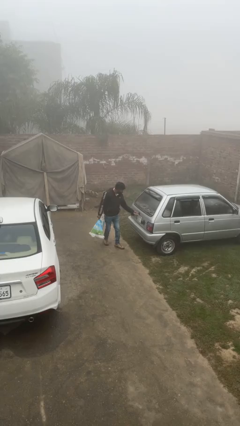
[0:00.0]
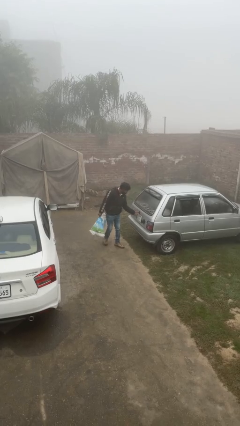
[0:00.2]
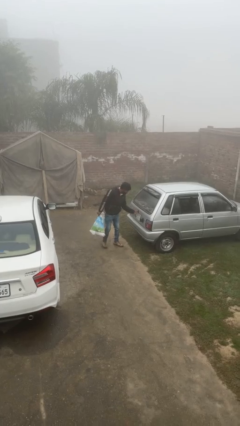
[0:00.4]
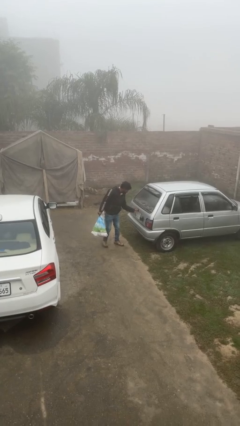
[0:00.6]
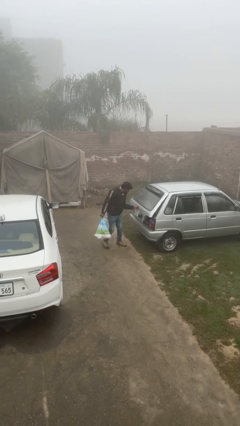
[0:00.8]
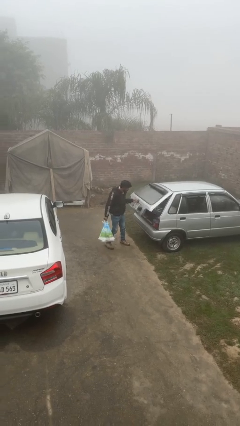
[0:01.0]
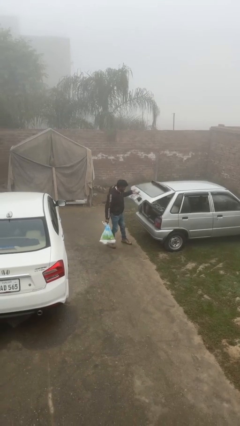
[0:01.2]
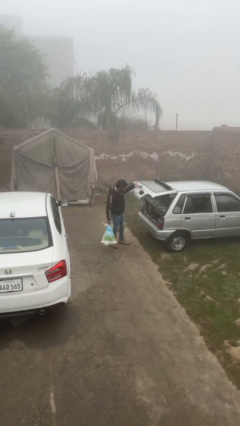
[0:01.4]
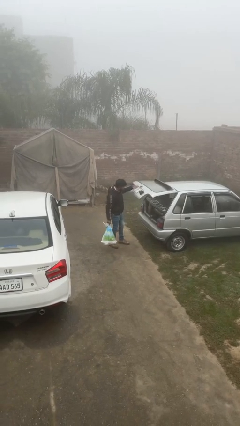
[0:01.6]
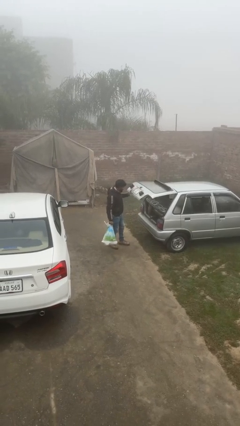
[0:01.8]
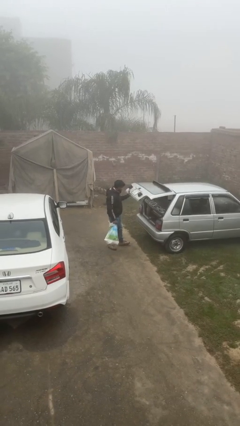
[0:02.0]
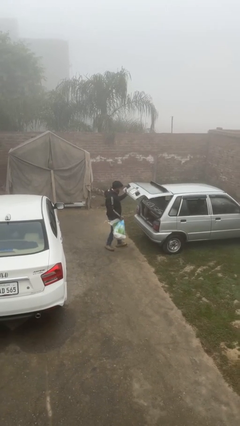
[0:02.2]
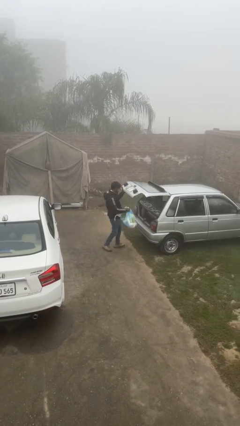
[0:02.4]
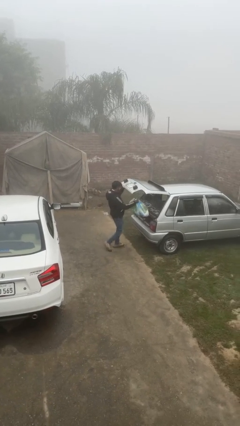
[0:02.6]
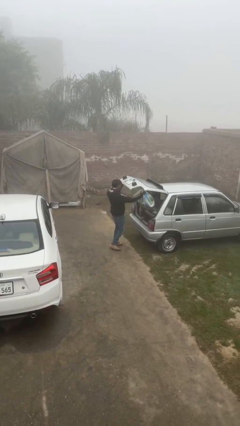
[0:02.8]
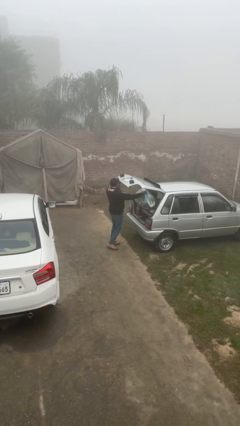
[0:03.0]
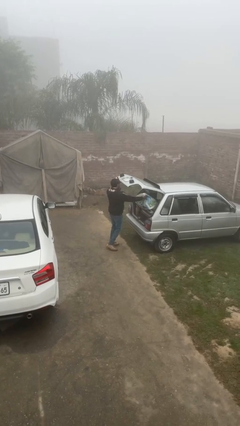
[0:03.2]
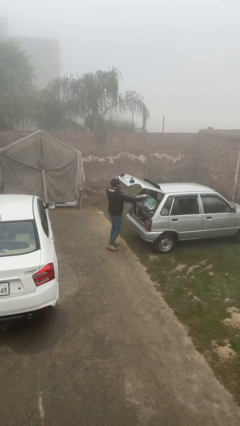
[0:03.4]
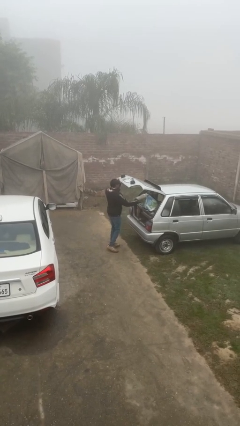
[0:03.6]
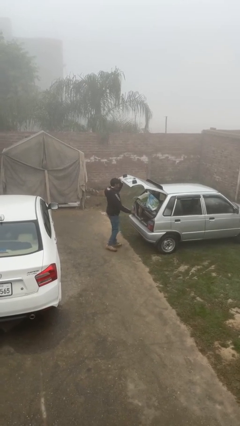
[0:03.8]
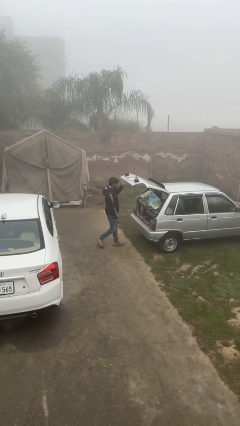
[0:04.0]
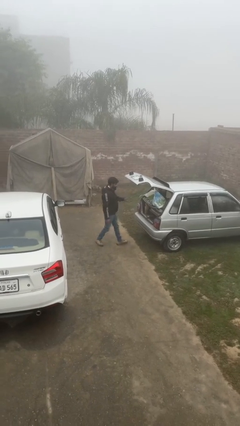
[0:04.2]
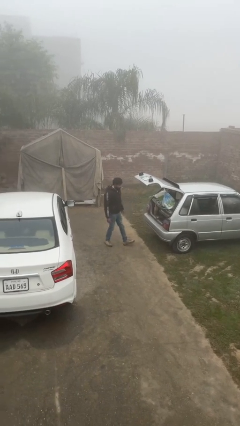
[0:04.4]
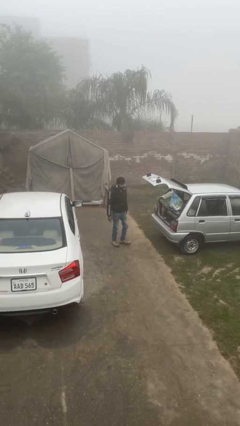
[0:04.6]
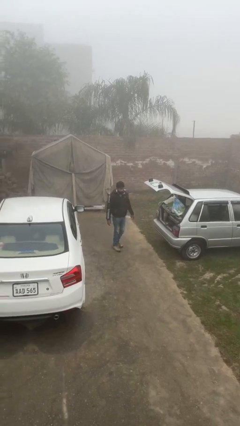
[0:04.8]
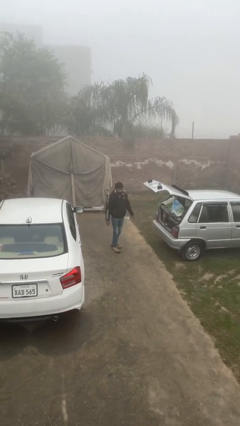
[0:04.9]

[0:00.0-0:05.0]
person loads car

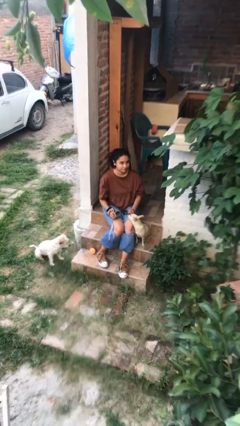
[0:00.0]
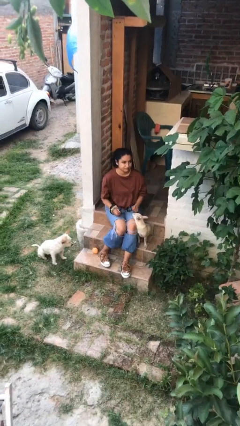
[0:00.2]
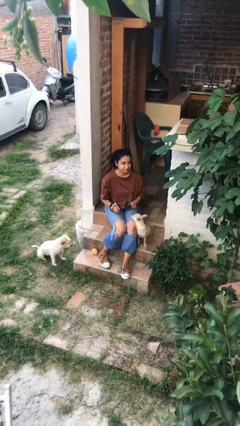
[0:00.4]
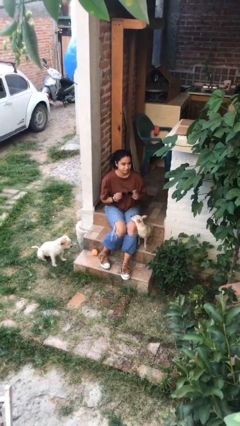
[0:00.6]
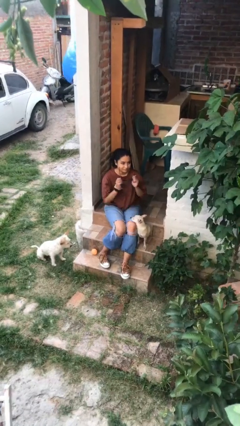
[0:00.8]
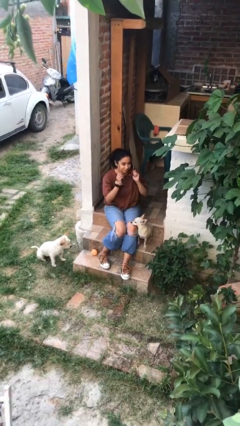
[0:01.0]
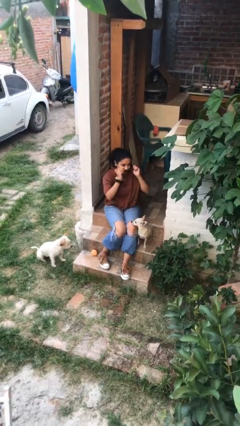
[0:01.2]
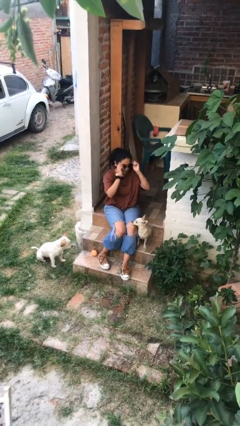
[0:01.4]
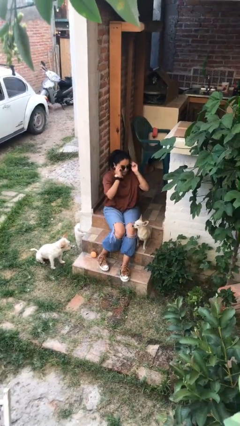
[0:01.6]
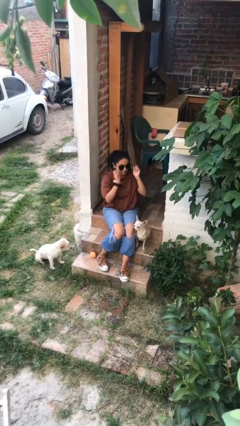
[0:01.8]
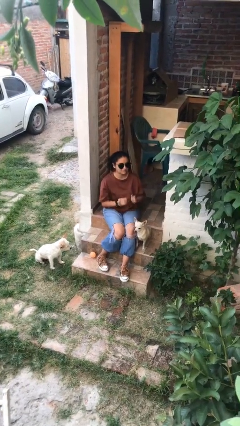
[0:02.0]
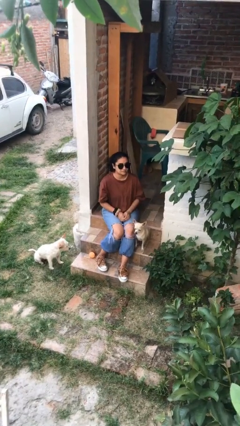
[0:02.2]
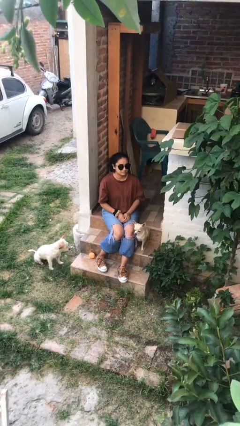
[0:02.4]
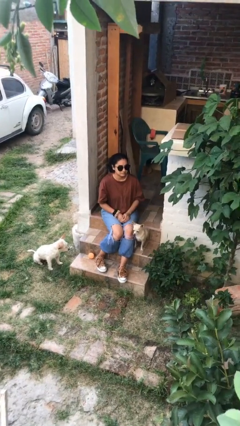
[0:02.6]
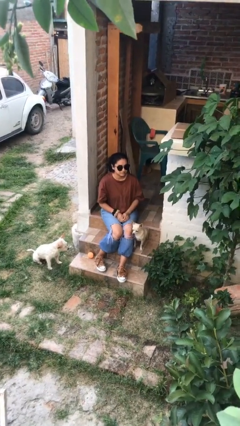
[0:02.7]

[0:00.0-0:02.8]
person puts on sunglasses

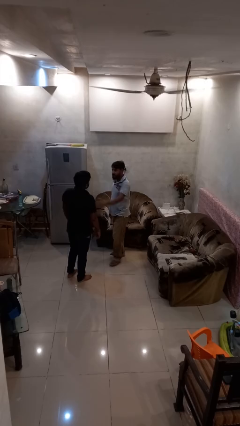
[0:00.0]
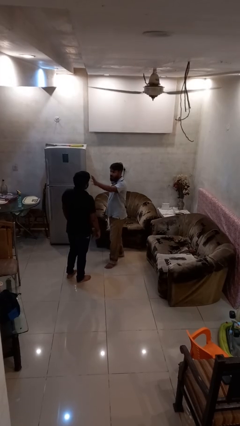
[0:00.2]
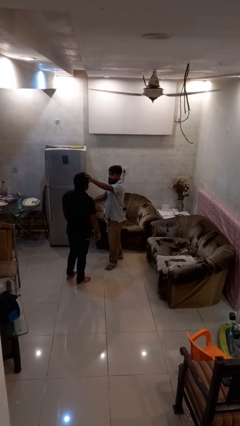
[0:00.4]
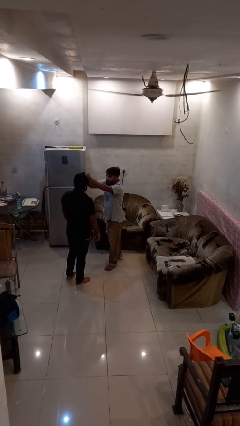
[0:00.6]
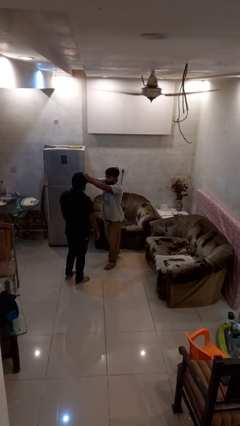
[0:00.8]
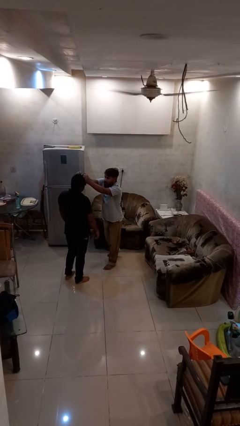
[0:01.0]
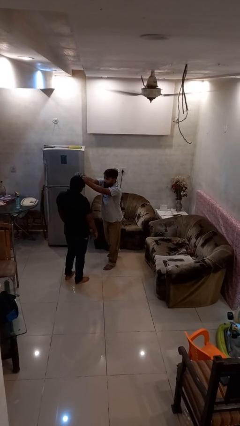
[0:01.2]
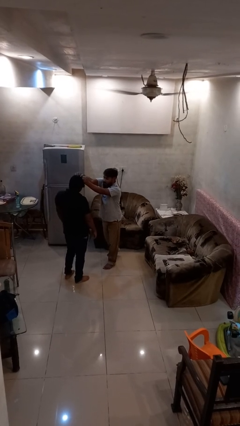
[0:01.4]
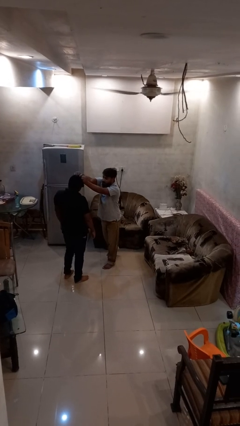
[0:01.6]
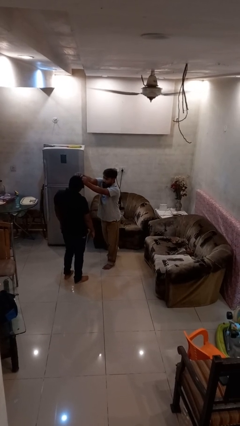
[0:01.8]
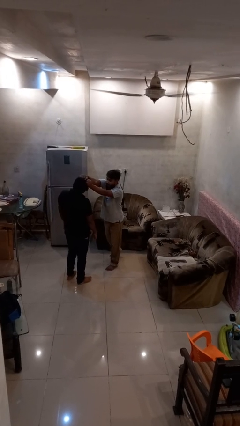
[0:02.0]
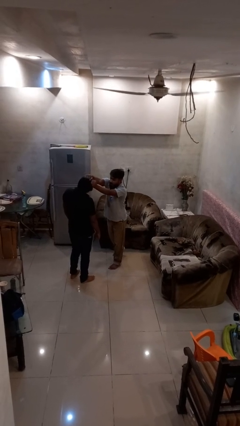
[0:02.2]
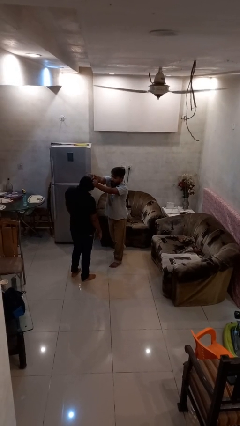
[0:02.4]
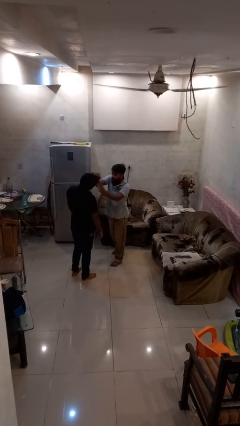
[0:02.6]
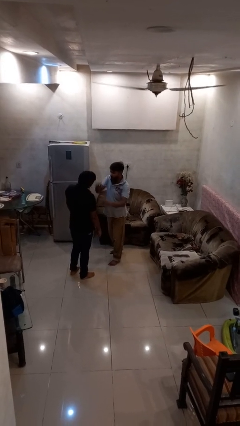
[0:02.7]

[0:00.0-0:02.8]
person grabs person by hair

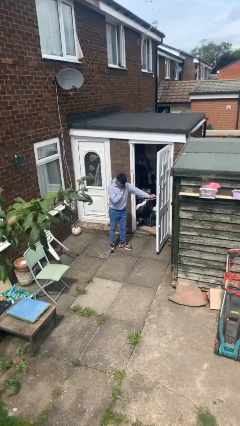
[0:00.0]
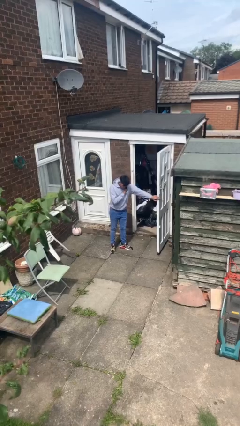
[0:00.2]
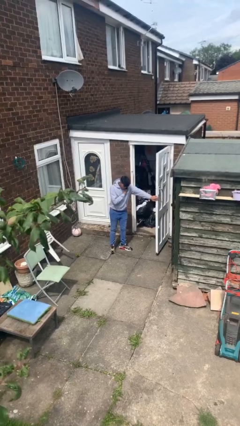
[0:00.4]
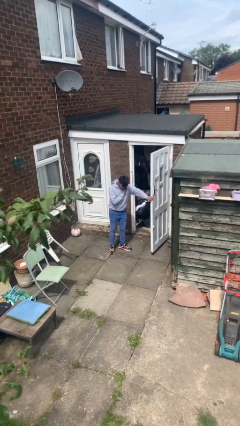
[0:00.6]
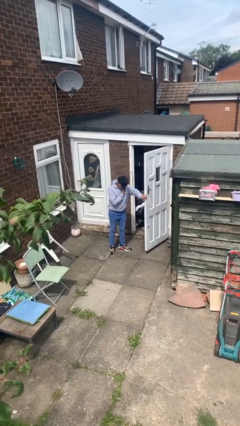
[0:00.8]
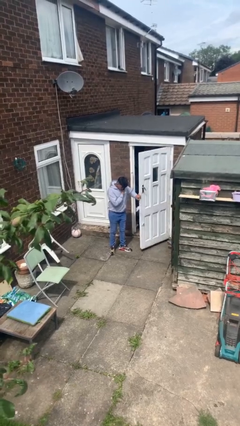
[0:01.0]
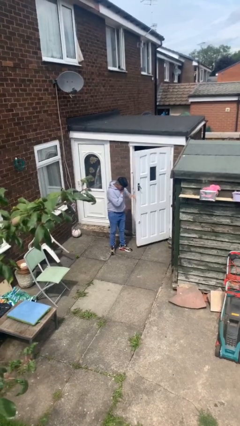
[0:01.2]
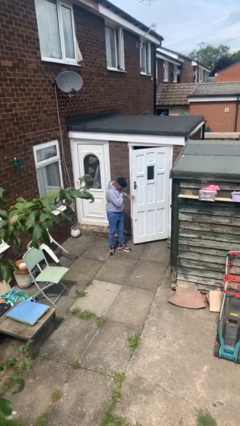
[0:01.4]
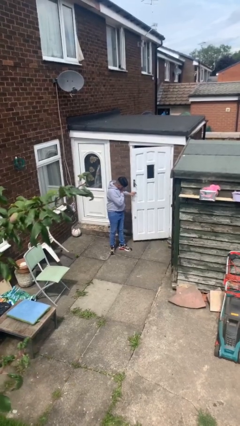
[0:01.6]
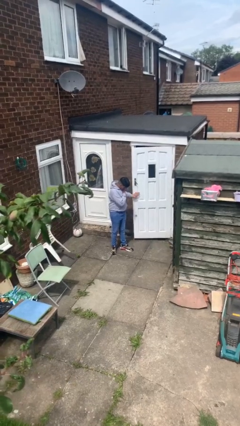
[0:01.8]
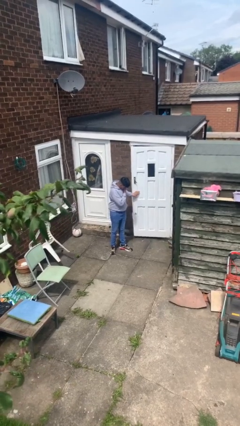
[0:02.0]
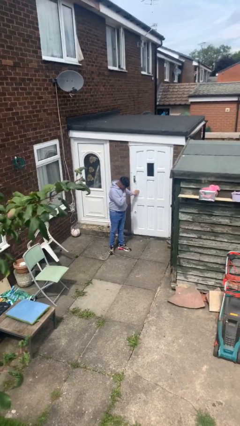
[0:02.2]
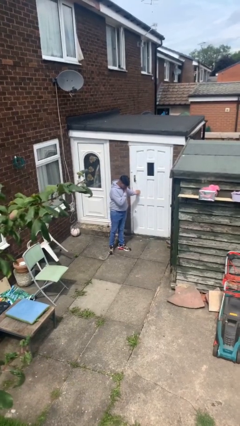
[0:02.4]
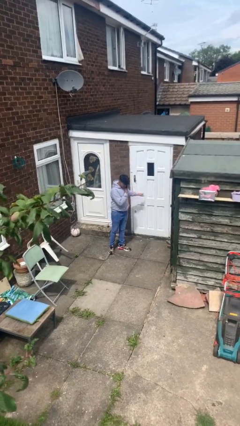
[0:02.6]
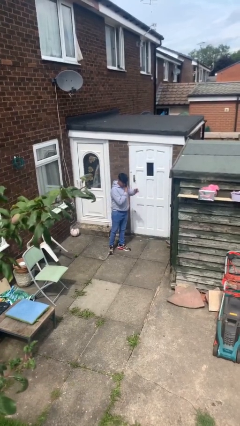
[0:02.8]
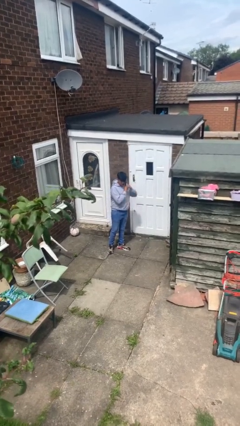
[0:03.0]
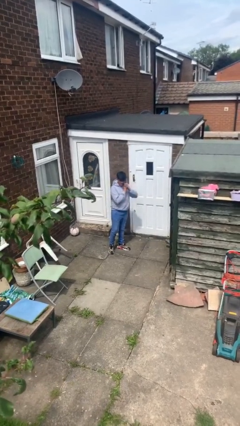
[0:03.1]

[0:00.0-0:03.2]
person closes facility door

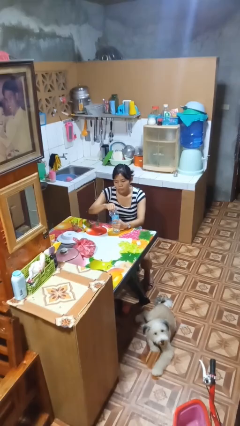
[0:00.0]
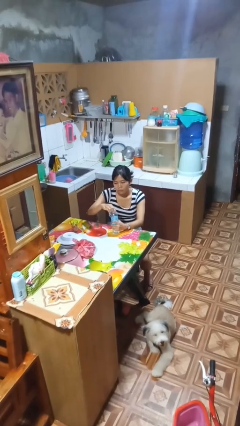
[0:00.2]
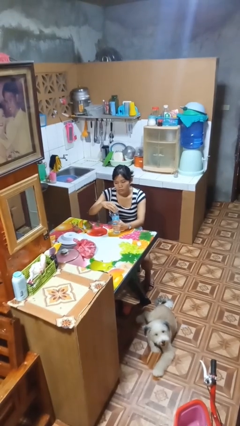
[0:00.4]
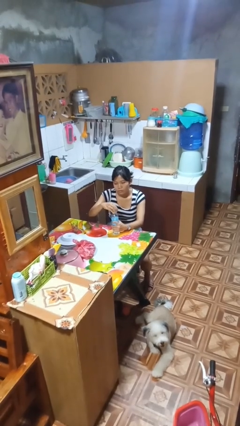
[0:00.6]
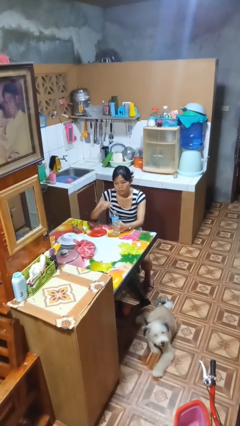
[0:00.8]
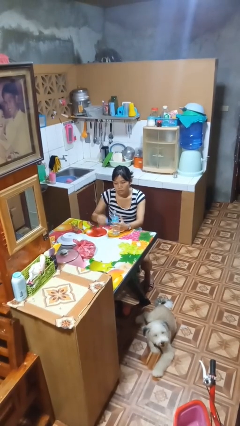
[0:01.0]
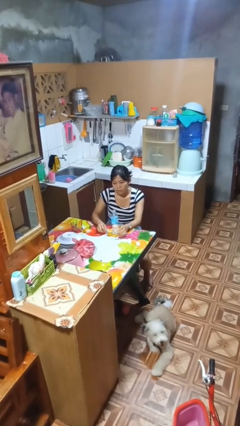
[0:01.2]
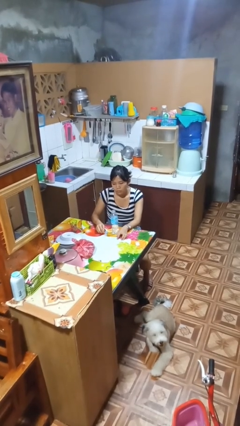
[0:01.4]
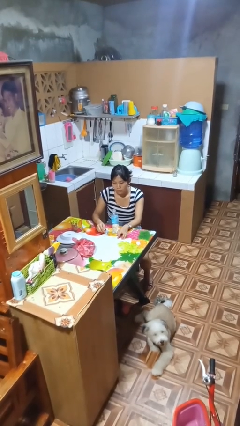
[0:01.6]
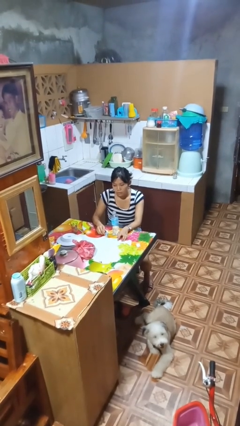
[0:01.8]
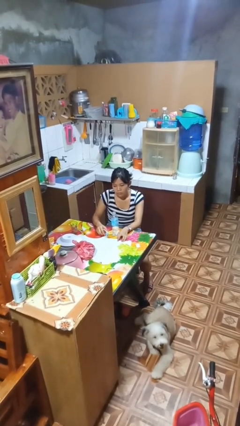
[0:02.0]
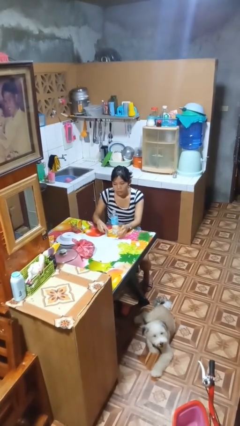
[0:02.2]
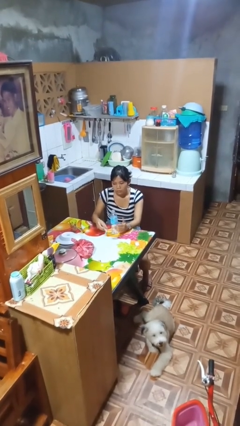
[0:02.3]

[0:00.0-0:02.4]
person unscrews lid from bottle

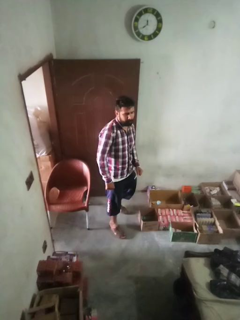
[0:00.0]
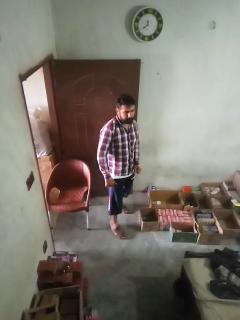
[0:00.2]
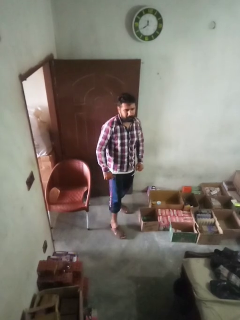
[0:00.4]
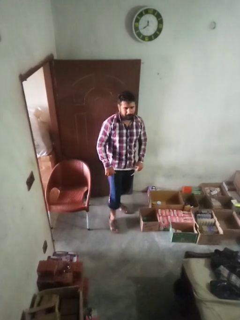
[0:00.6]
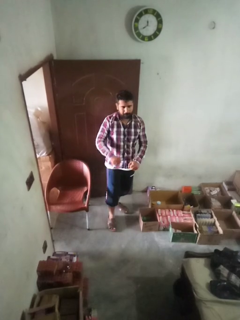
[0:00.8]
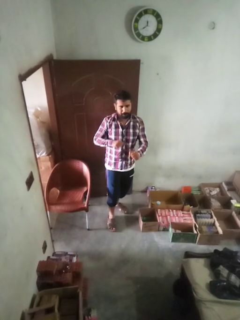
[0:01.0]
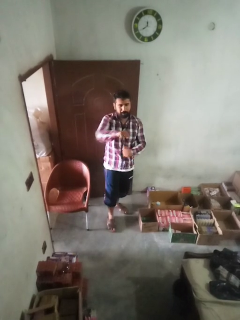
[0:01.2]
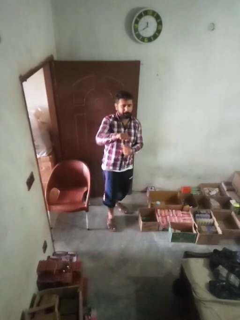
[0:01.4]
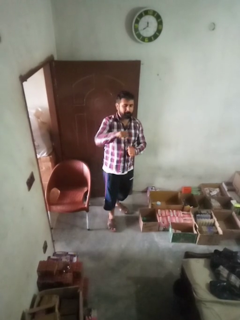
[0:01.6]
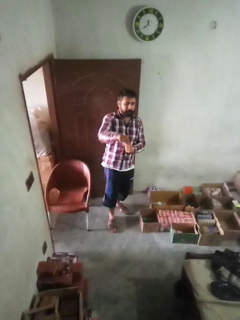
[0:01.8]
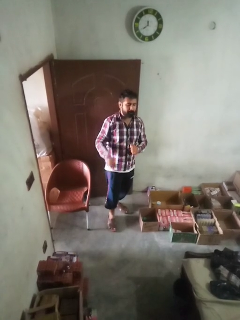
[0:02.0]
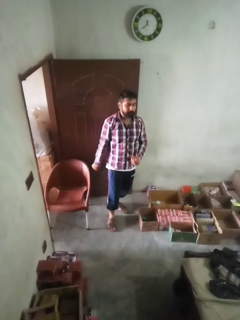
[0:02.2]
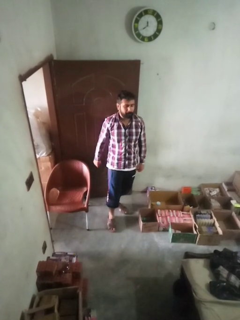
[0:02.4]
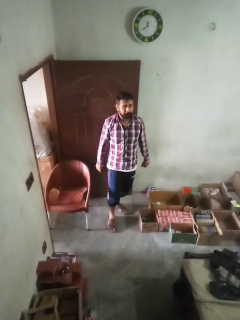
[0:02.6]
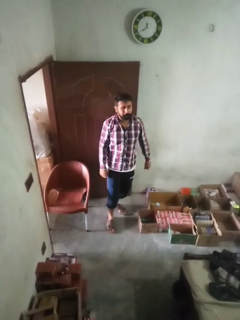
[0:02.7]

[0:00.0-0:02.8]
person karate chop
